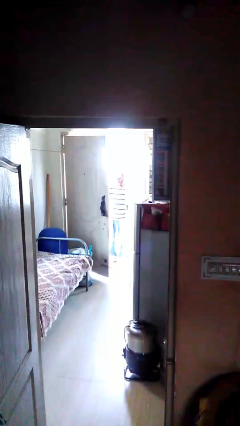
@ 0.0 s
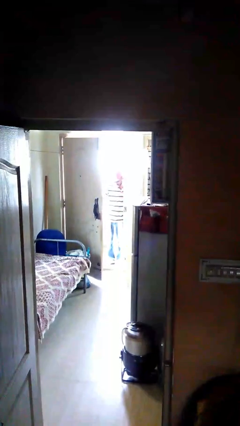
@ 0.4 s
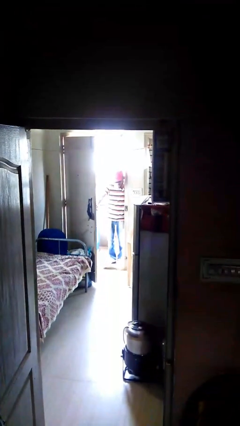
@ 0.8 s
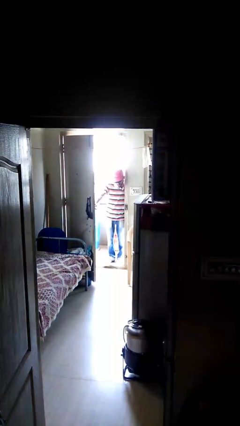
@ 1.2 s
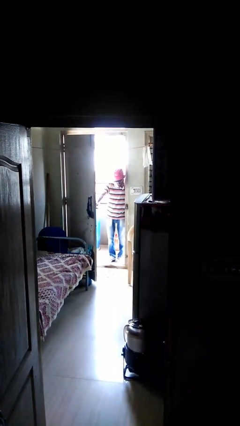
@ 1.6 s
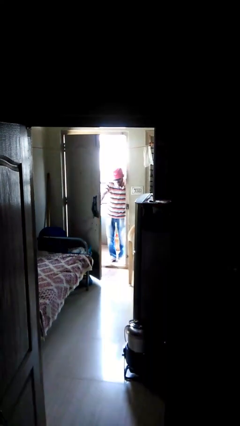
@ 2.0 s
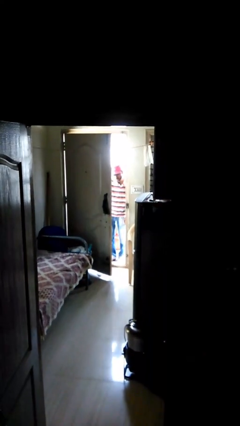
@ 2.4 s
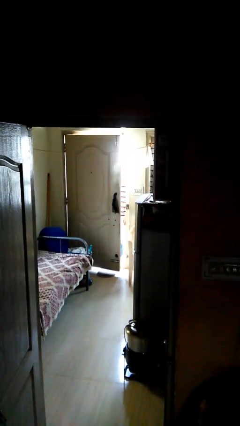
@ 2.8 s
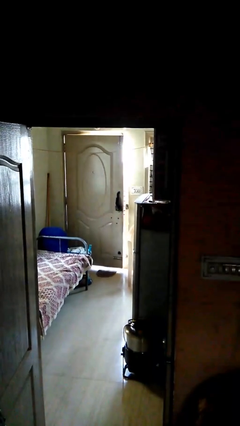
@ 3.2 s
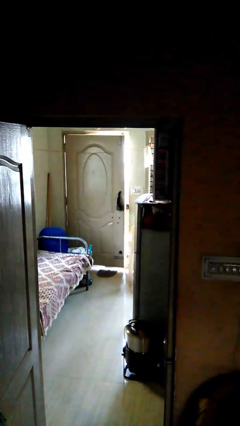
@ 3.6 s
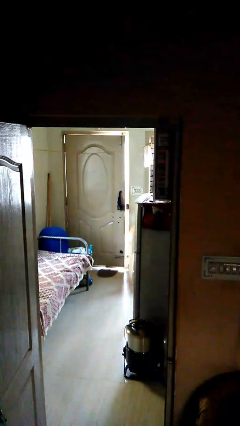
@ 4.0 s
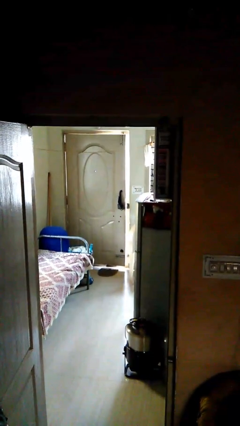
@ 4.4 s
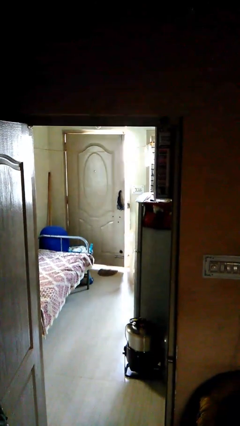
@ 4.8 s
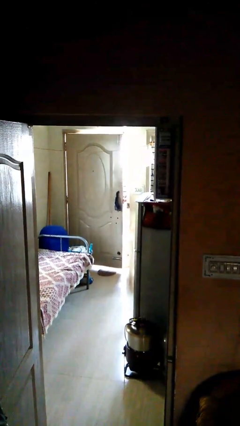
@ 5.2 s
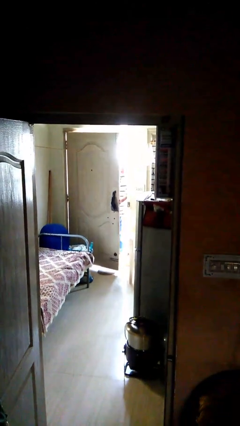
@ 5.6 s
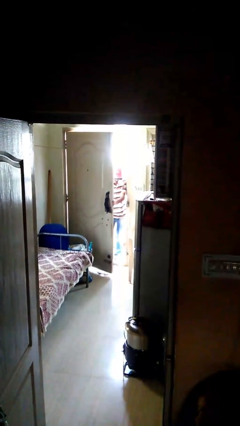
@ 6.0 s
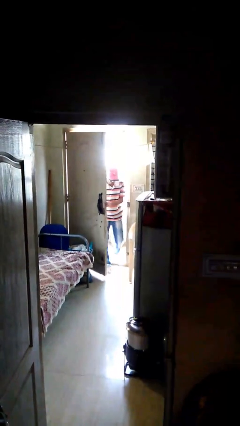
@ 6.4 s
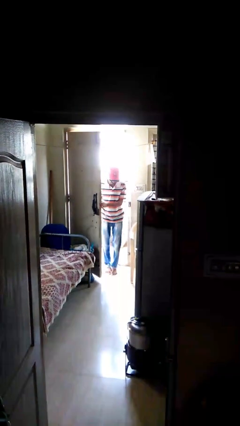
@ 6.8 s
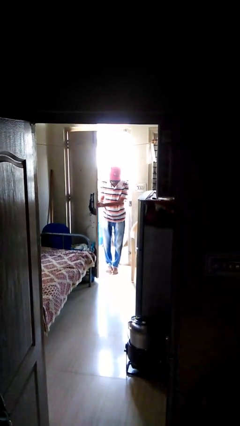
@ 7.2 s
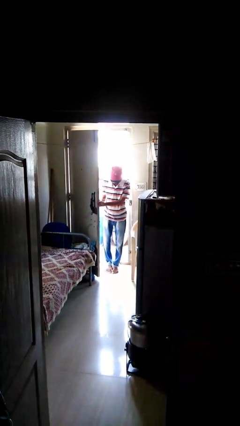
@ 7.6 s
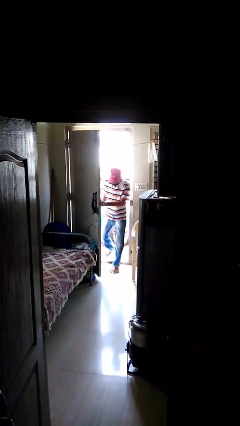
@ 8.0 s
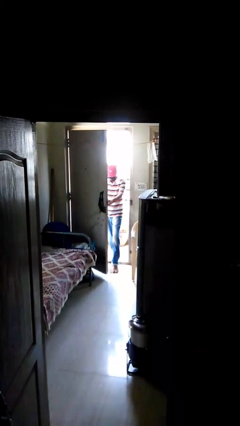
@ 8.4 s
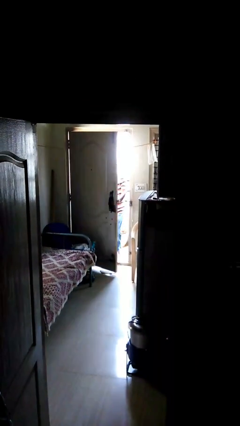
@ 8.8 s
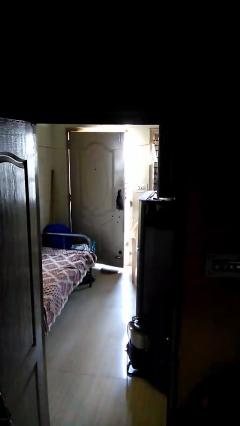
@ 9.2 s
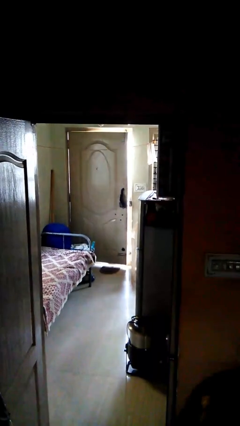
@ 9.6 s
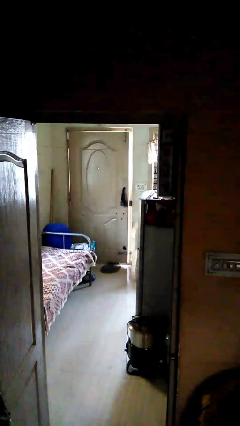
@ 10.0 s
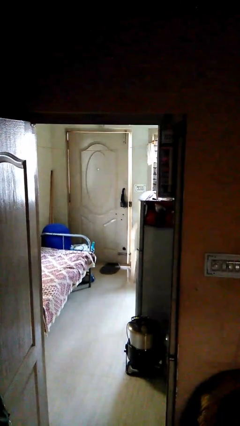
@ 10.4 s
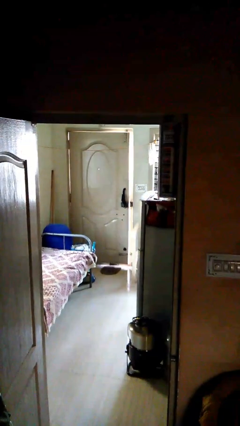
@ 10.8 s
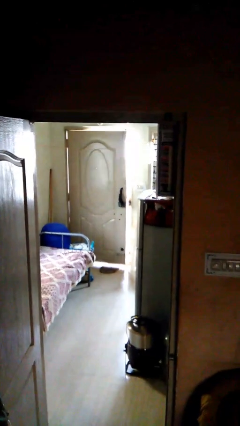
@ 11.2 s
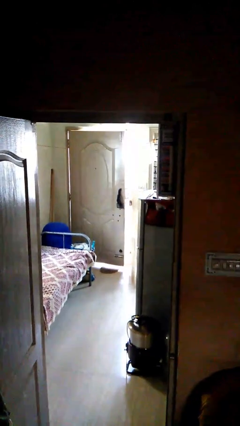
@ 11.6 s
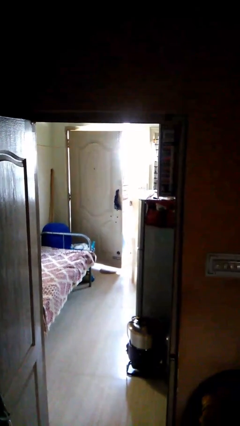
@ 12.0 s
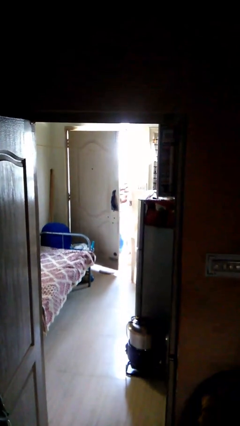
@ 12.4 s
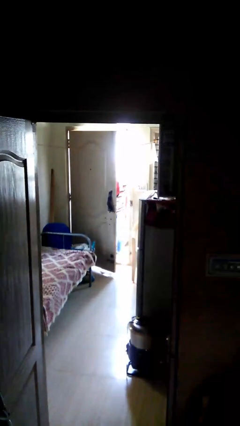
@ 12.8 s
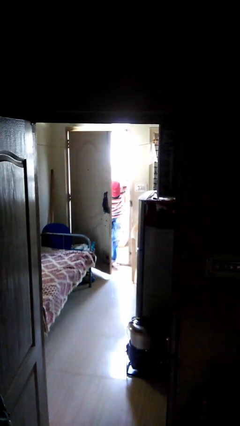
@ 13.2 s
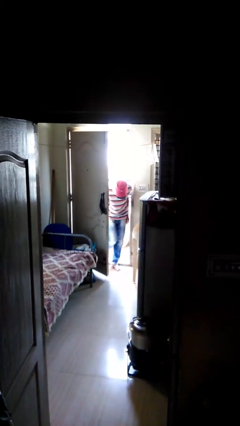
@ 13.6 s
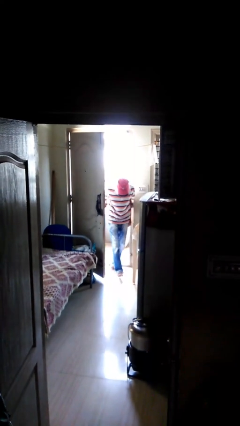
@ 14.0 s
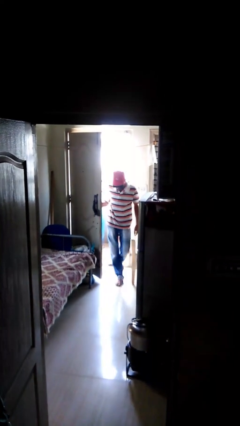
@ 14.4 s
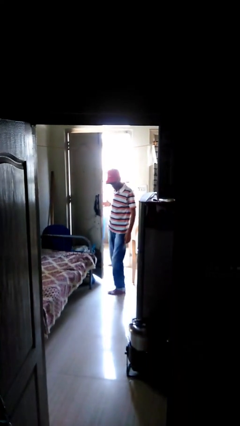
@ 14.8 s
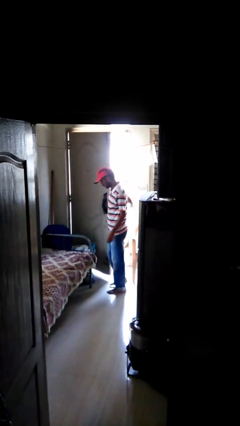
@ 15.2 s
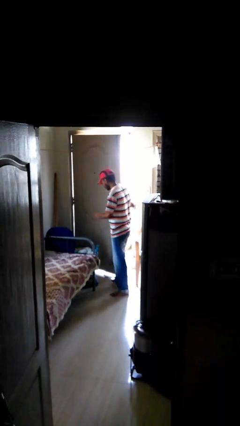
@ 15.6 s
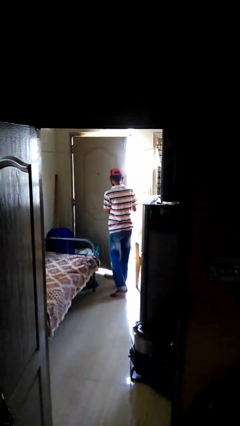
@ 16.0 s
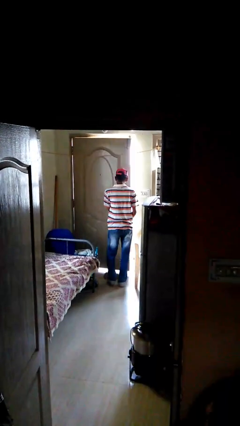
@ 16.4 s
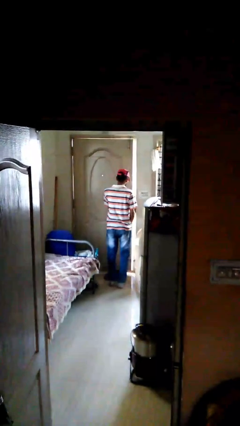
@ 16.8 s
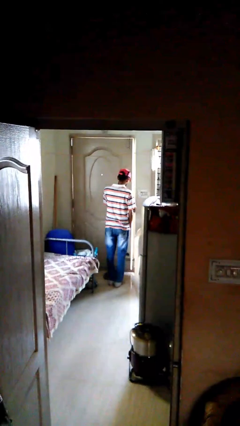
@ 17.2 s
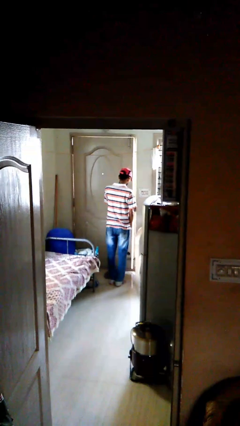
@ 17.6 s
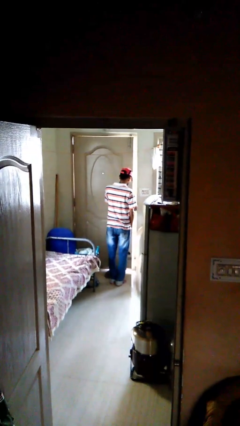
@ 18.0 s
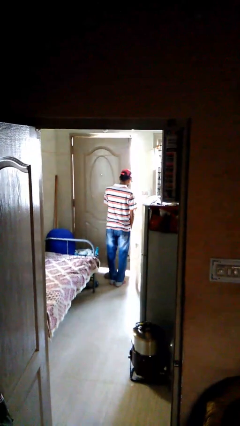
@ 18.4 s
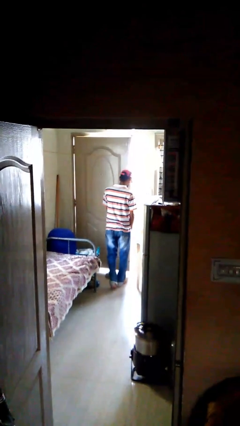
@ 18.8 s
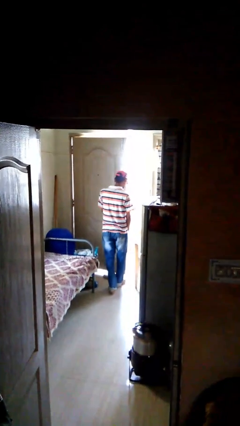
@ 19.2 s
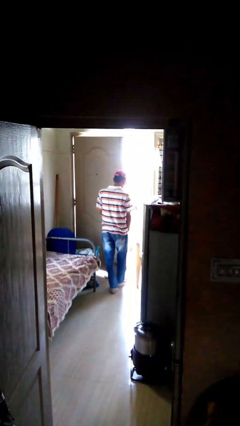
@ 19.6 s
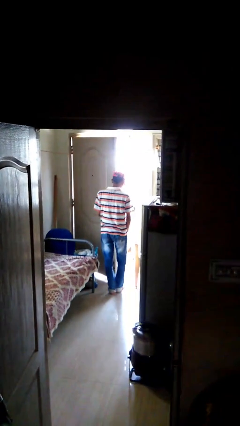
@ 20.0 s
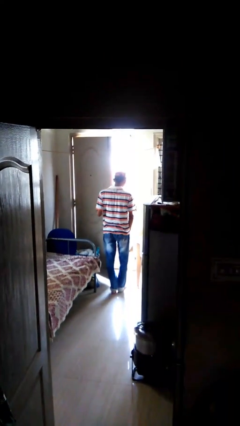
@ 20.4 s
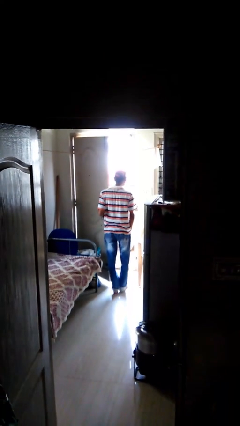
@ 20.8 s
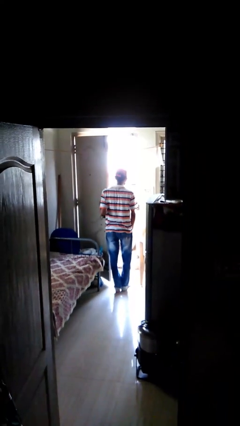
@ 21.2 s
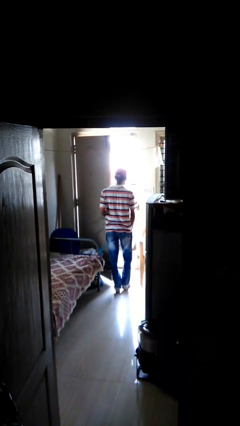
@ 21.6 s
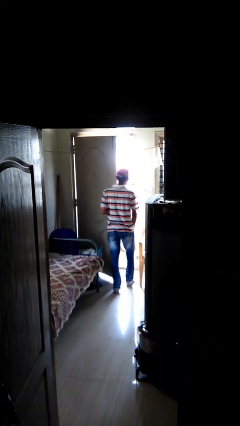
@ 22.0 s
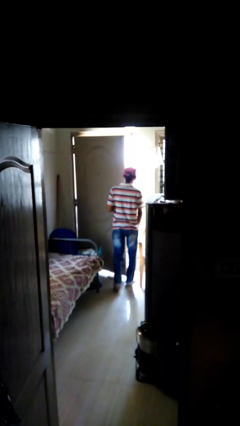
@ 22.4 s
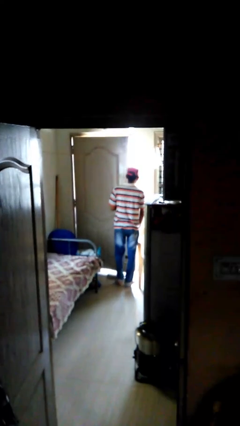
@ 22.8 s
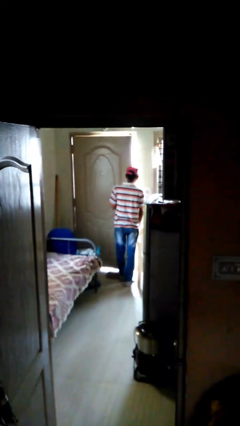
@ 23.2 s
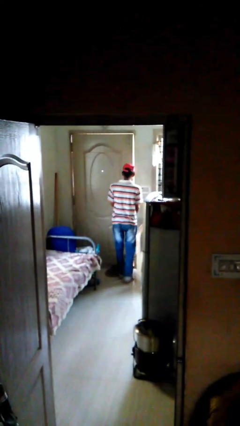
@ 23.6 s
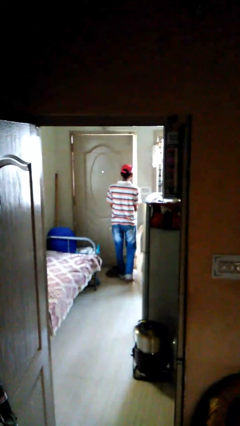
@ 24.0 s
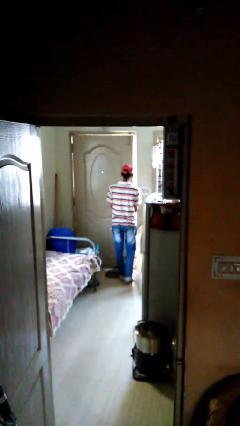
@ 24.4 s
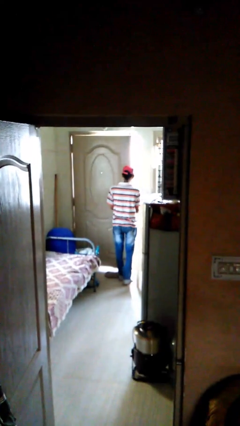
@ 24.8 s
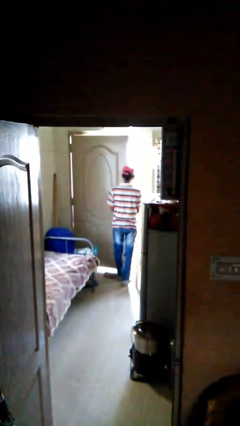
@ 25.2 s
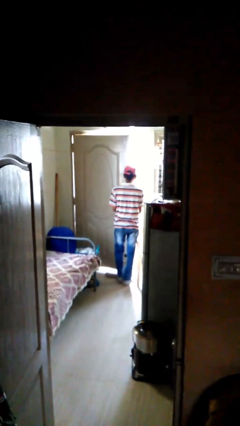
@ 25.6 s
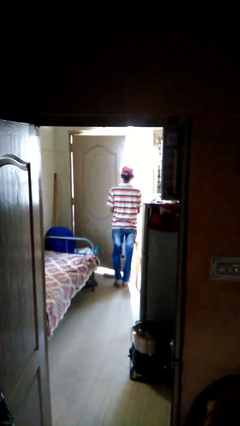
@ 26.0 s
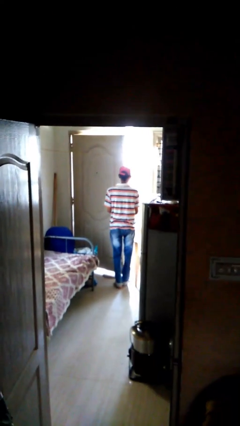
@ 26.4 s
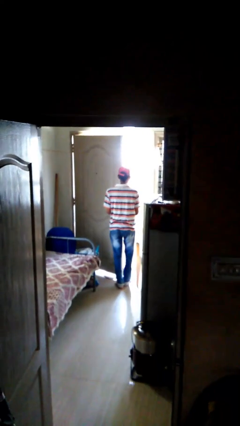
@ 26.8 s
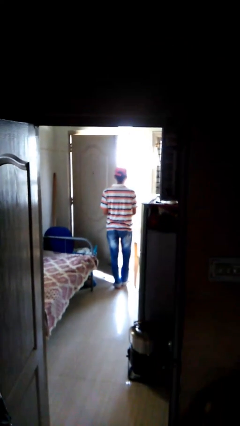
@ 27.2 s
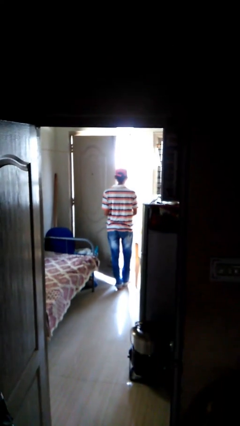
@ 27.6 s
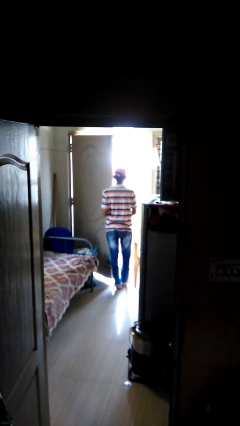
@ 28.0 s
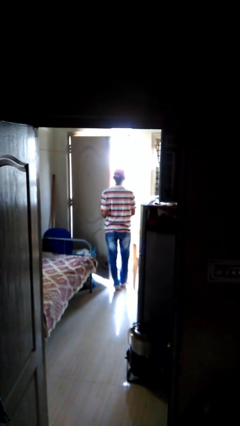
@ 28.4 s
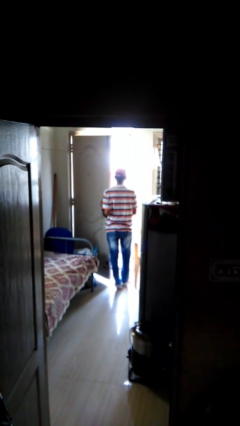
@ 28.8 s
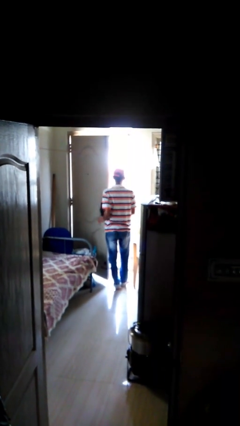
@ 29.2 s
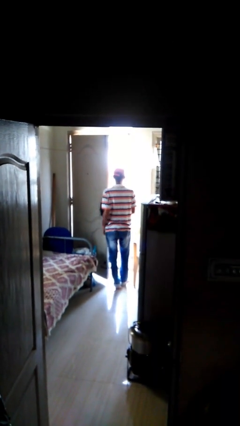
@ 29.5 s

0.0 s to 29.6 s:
person opens facility door

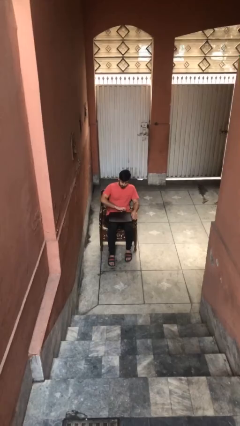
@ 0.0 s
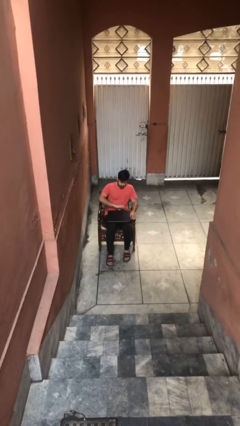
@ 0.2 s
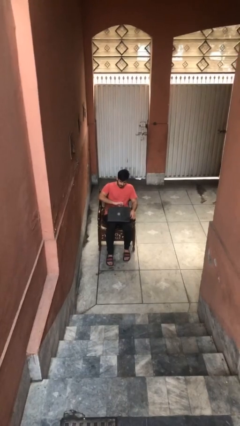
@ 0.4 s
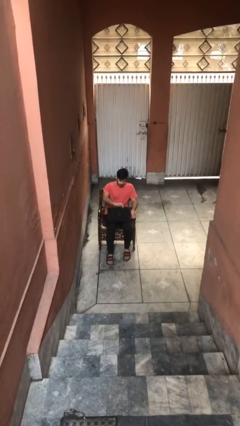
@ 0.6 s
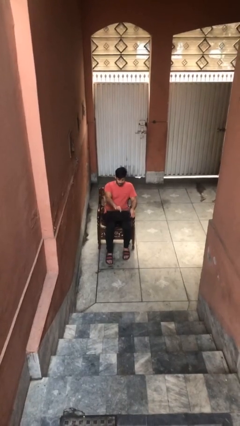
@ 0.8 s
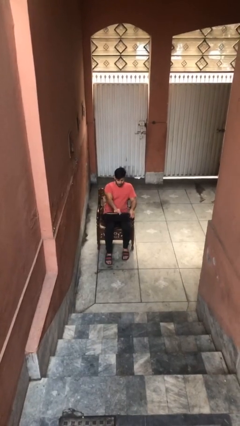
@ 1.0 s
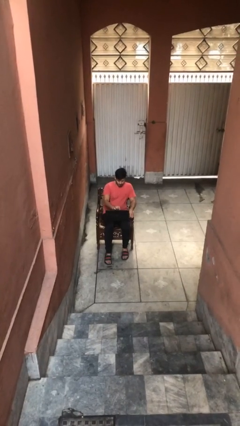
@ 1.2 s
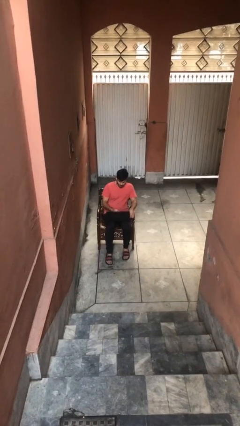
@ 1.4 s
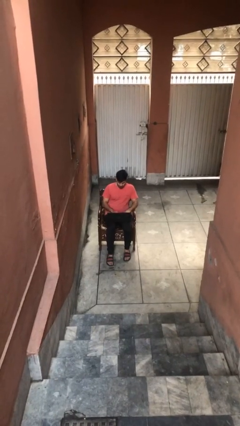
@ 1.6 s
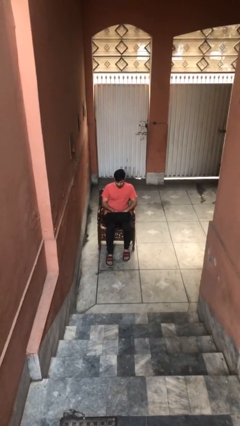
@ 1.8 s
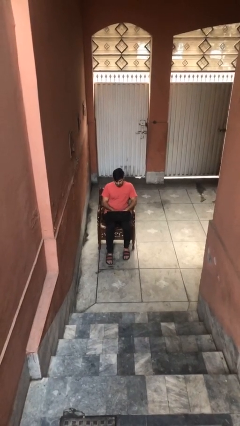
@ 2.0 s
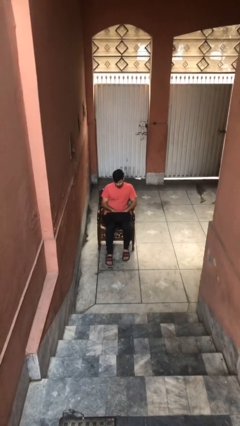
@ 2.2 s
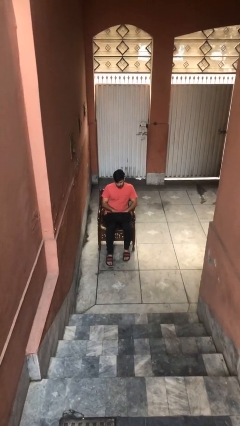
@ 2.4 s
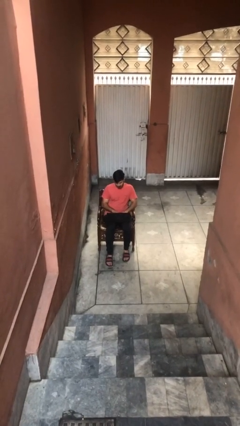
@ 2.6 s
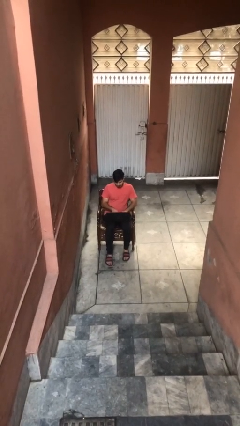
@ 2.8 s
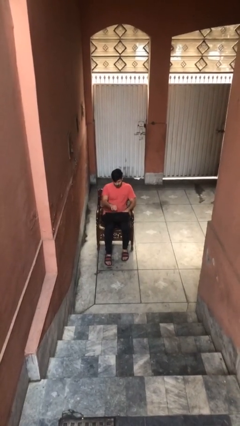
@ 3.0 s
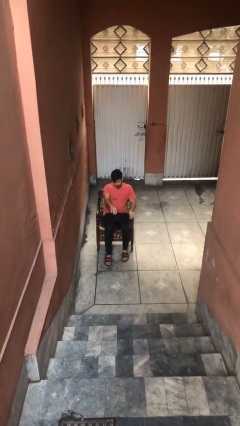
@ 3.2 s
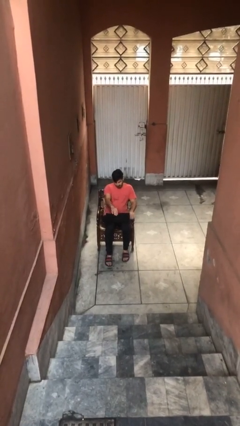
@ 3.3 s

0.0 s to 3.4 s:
person interacts with laptop
